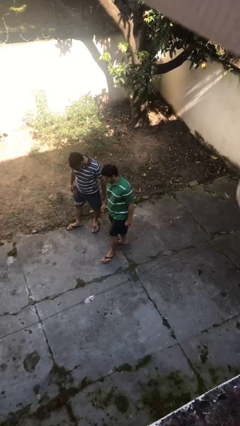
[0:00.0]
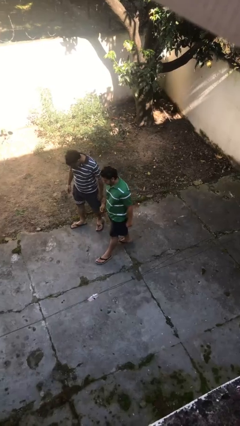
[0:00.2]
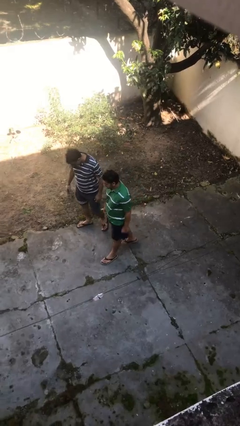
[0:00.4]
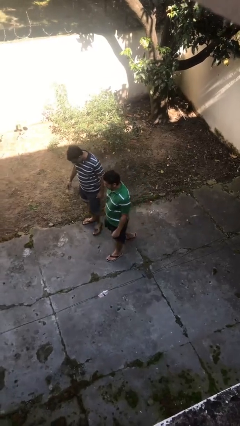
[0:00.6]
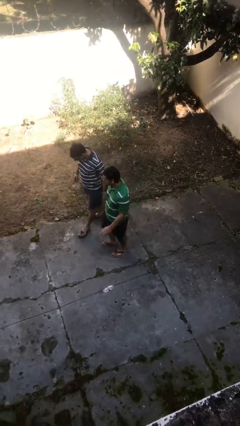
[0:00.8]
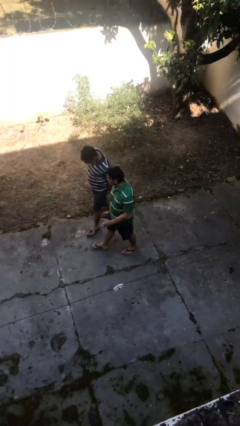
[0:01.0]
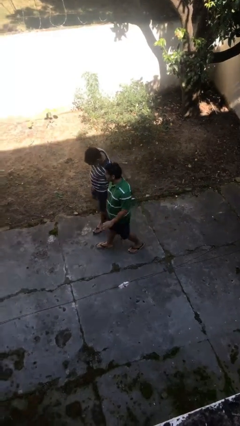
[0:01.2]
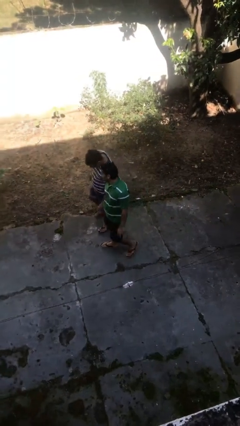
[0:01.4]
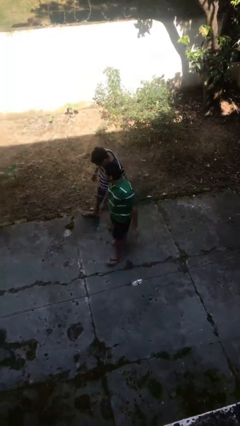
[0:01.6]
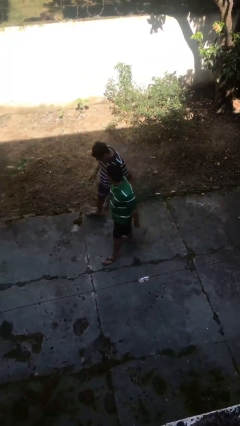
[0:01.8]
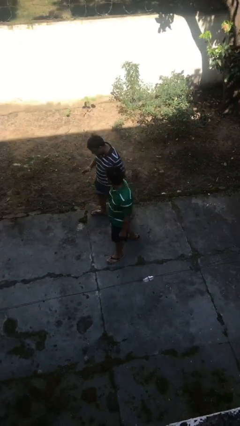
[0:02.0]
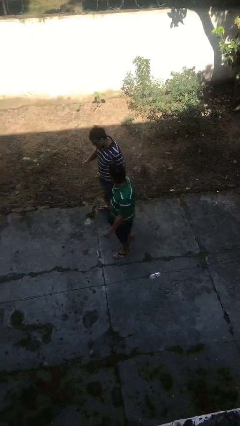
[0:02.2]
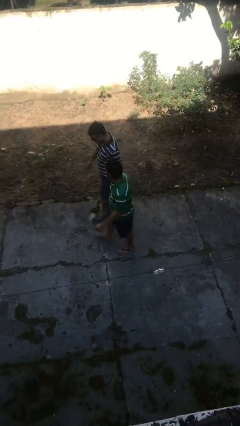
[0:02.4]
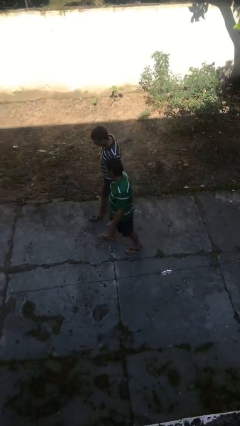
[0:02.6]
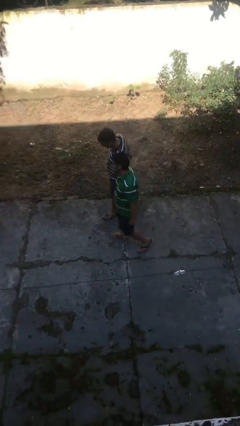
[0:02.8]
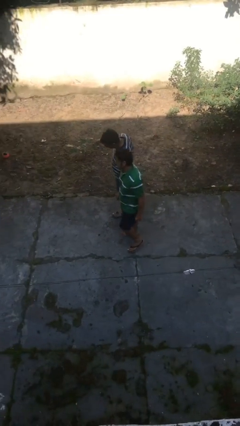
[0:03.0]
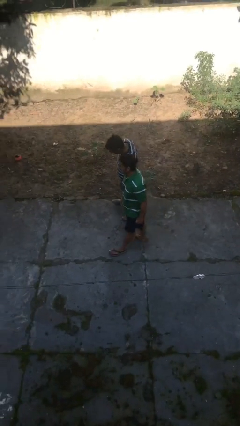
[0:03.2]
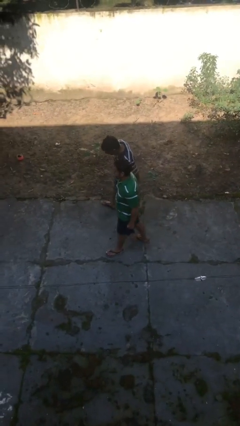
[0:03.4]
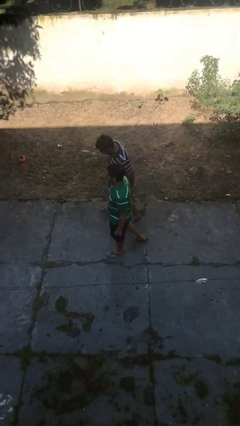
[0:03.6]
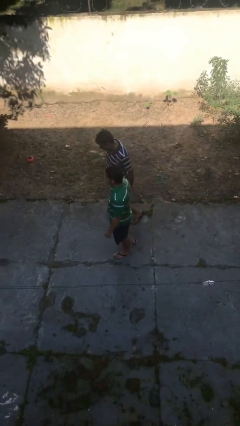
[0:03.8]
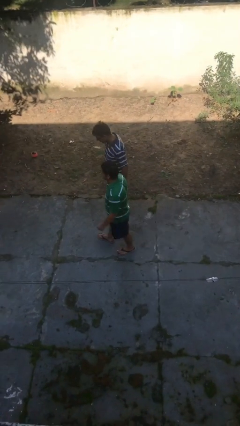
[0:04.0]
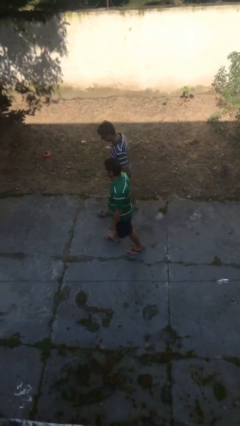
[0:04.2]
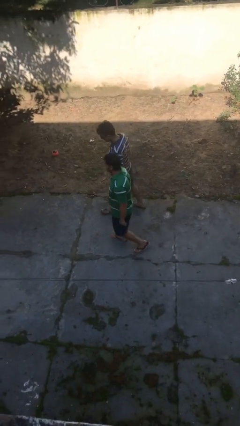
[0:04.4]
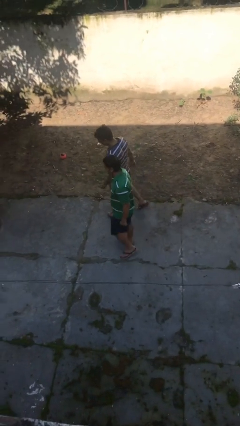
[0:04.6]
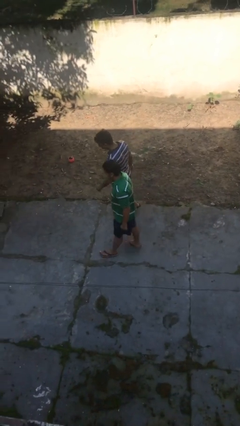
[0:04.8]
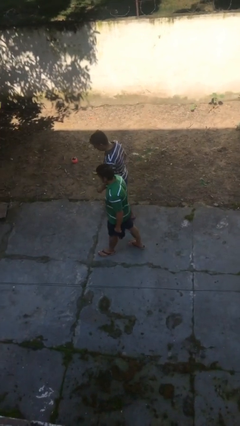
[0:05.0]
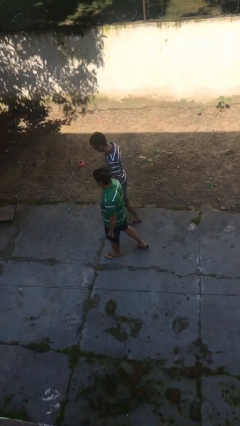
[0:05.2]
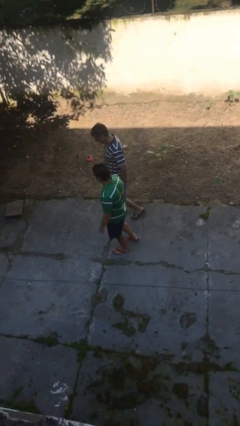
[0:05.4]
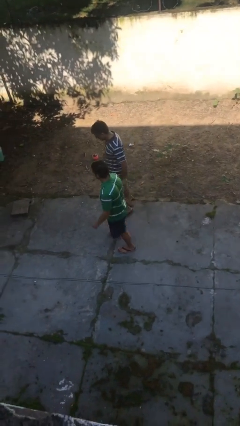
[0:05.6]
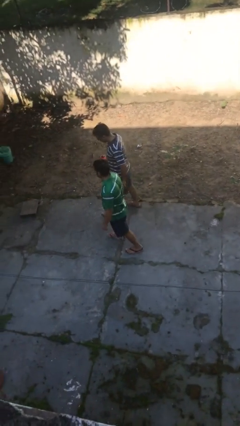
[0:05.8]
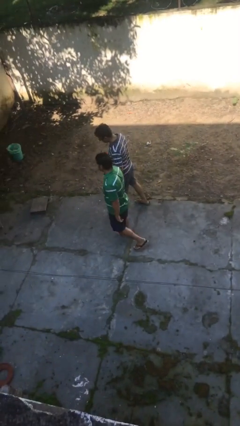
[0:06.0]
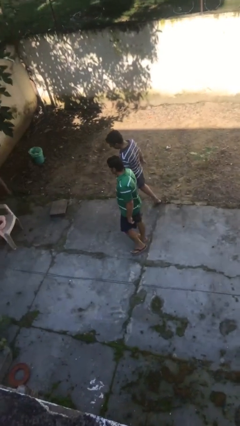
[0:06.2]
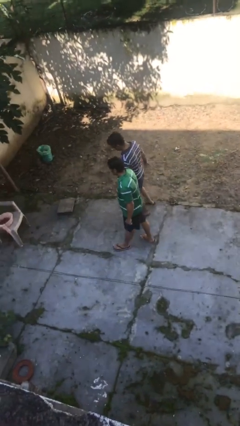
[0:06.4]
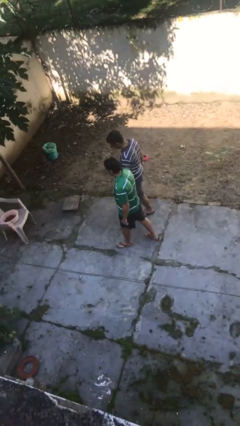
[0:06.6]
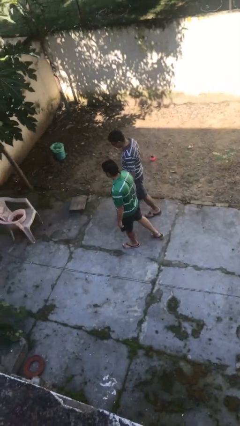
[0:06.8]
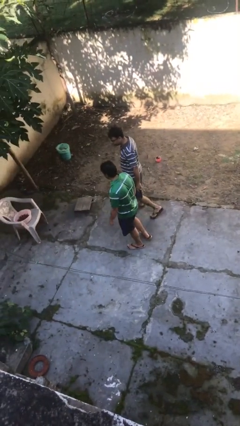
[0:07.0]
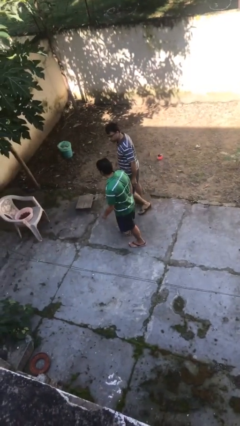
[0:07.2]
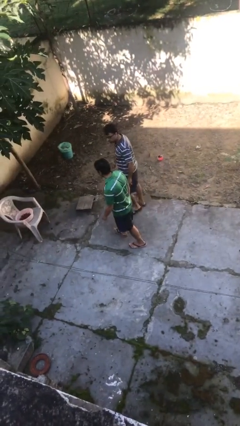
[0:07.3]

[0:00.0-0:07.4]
person talks to person

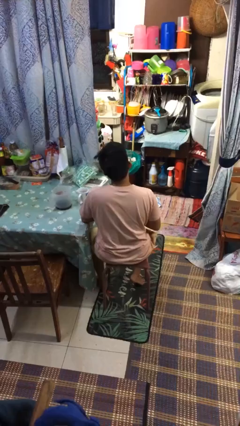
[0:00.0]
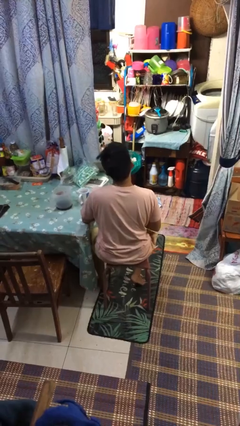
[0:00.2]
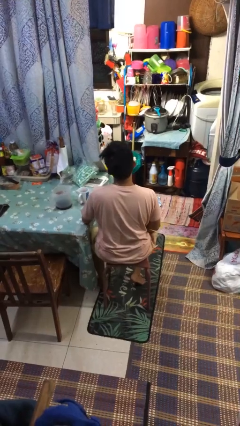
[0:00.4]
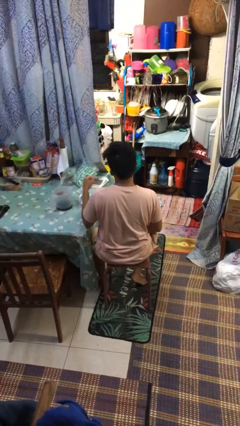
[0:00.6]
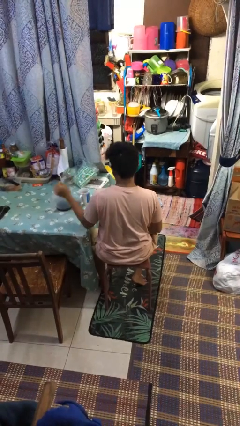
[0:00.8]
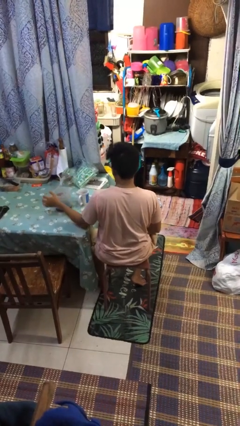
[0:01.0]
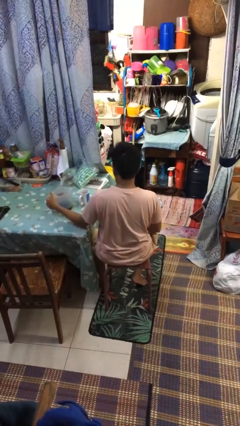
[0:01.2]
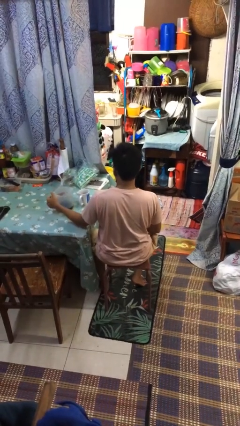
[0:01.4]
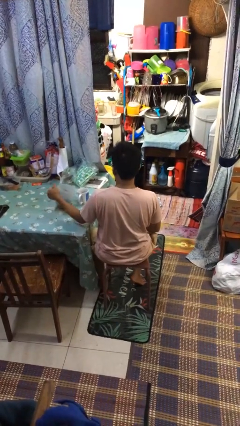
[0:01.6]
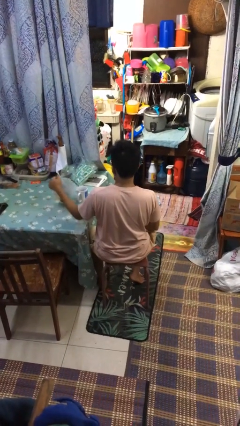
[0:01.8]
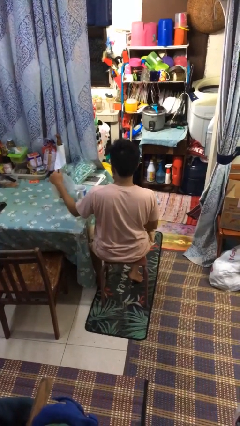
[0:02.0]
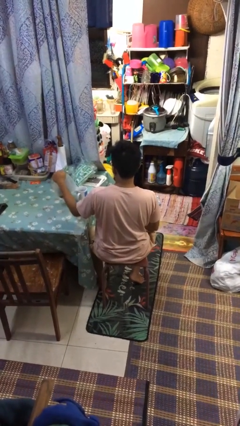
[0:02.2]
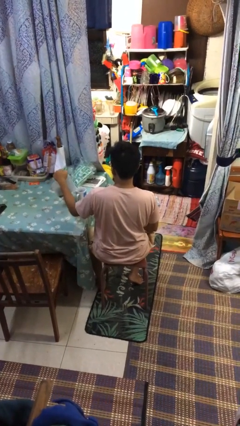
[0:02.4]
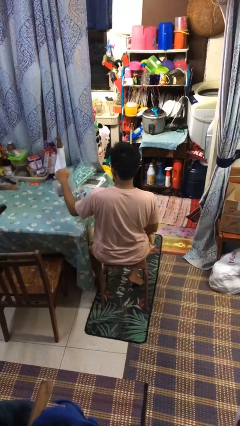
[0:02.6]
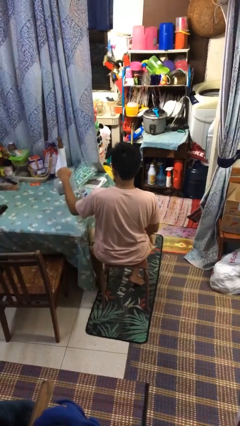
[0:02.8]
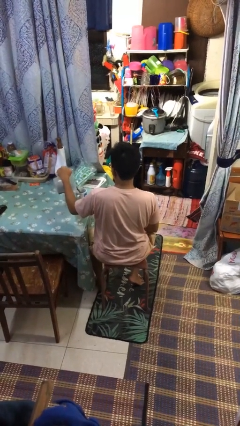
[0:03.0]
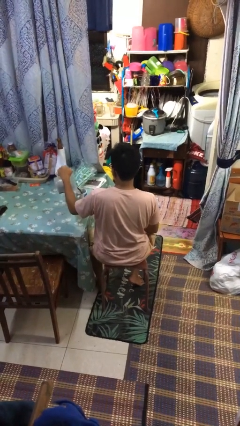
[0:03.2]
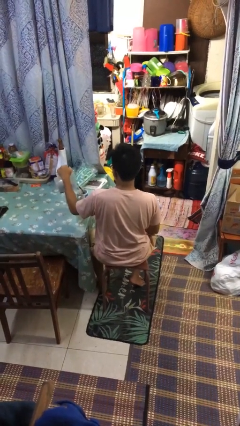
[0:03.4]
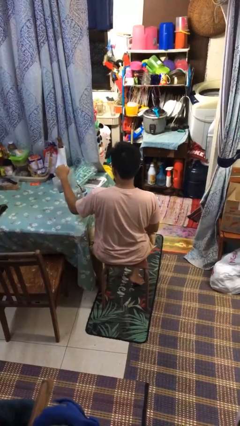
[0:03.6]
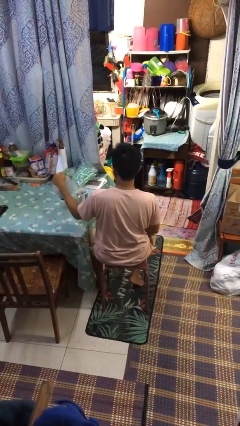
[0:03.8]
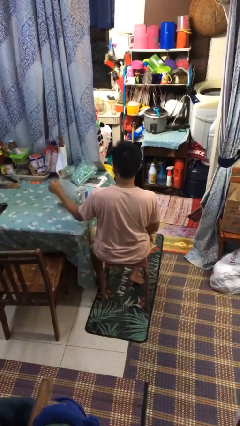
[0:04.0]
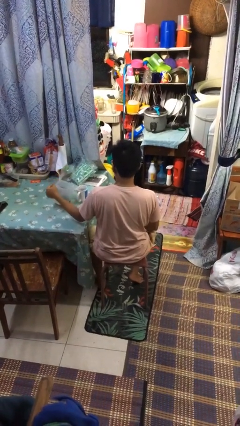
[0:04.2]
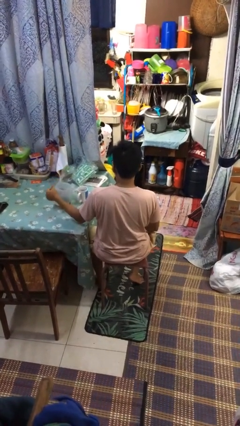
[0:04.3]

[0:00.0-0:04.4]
person pours coffee into mug

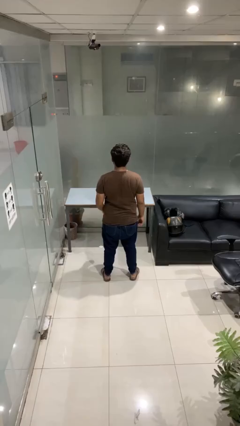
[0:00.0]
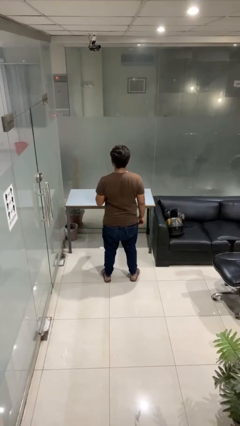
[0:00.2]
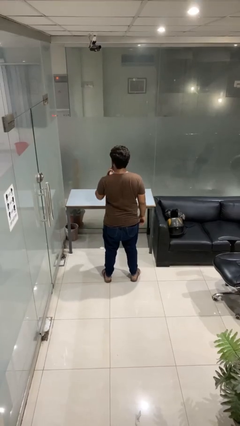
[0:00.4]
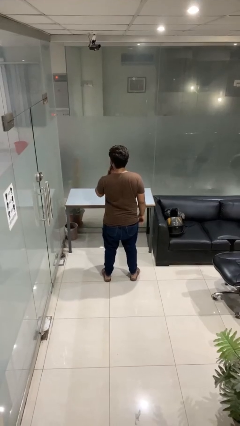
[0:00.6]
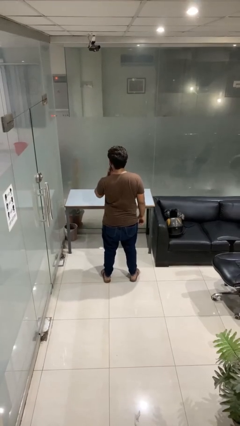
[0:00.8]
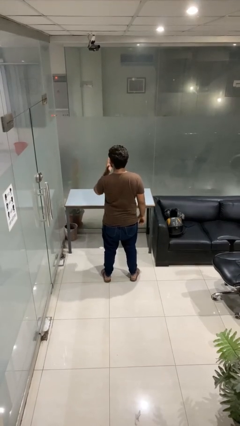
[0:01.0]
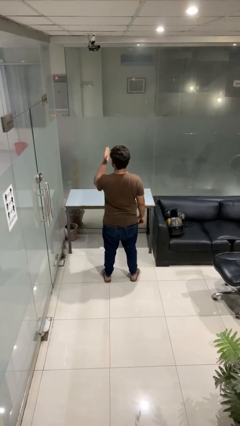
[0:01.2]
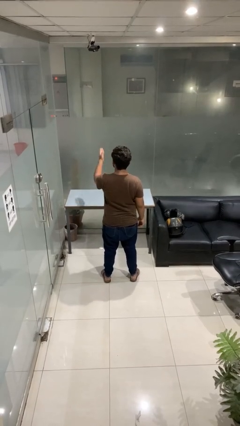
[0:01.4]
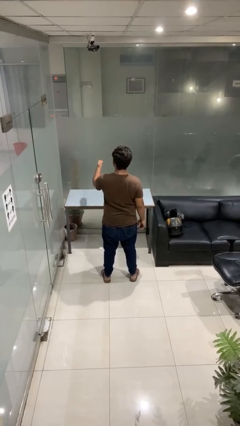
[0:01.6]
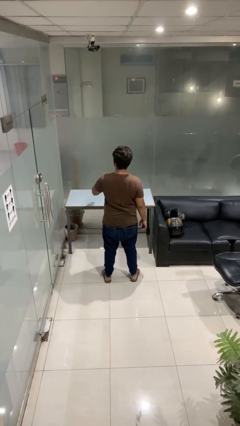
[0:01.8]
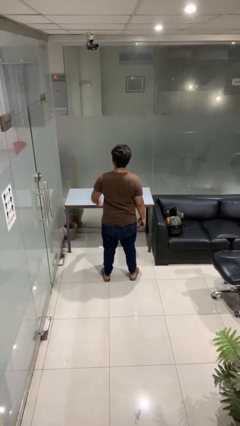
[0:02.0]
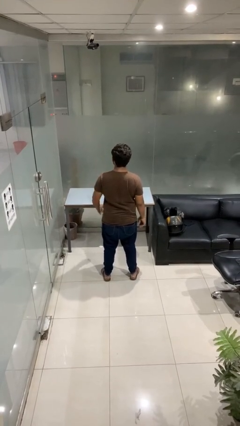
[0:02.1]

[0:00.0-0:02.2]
person gestures blow kiss

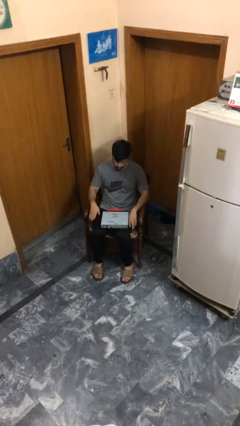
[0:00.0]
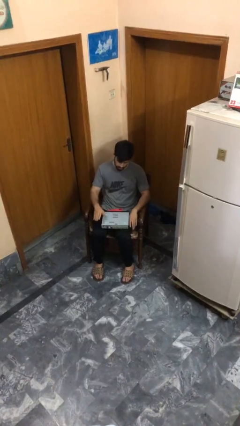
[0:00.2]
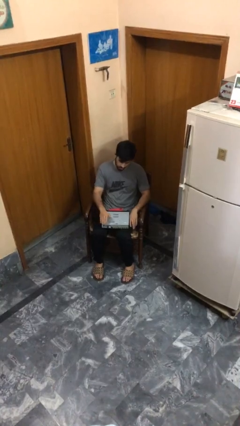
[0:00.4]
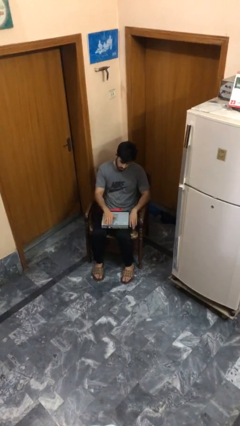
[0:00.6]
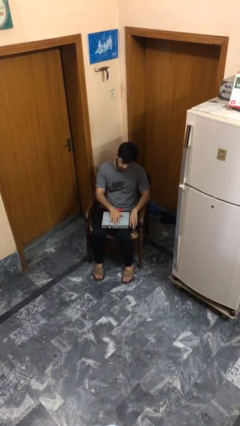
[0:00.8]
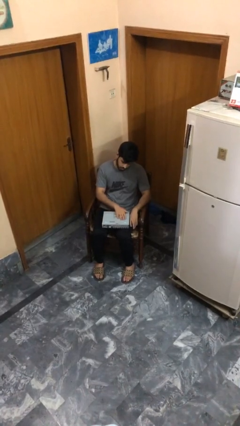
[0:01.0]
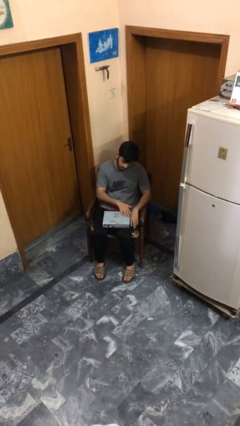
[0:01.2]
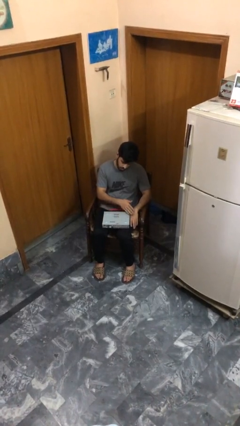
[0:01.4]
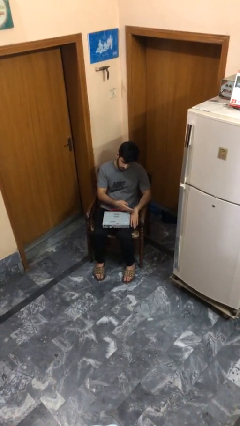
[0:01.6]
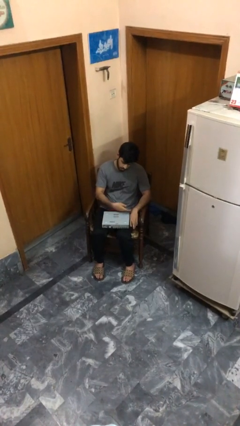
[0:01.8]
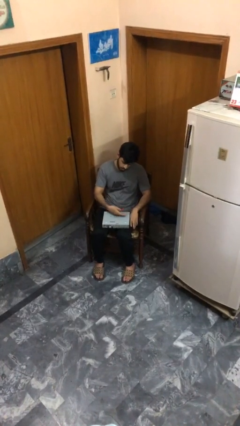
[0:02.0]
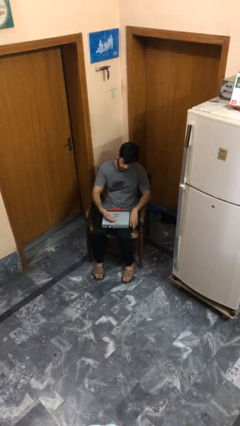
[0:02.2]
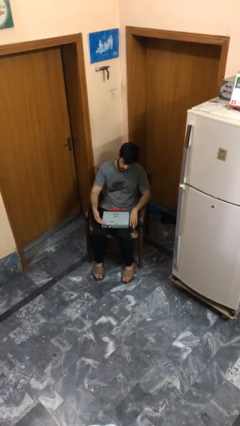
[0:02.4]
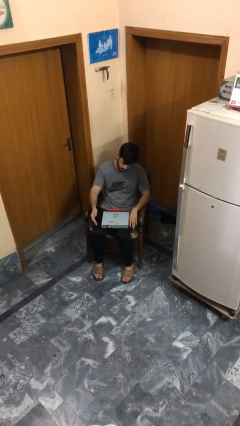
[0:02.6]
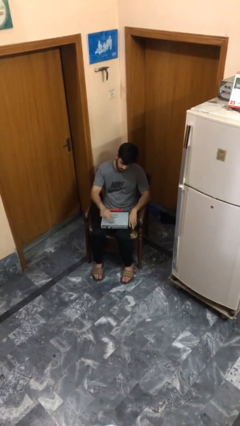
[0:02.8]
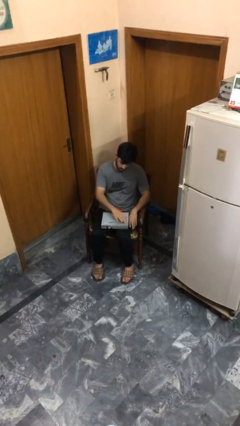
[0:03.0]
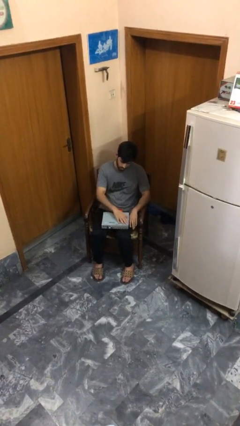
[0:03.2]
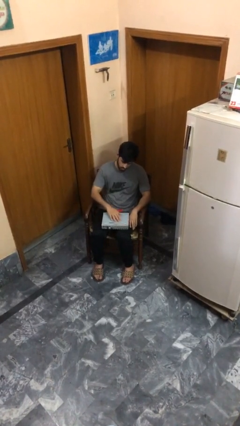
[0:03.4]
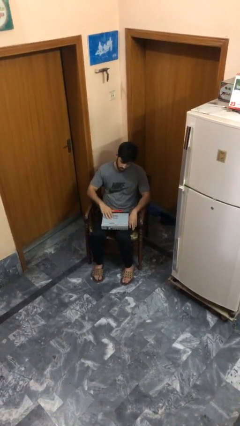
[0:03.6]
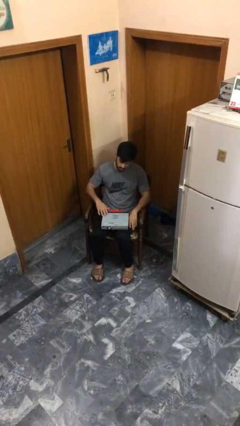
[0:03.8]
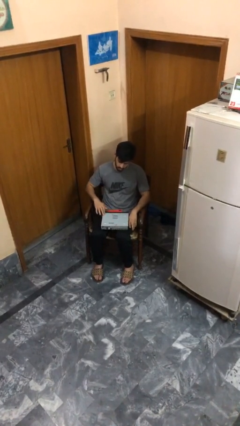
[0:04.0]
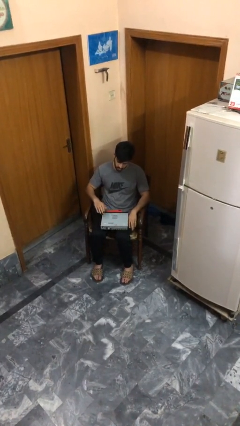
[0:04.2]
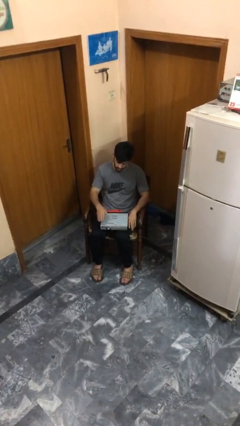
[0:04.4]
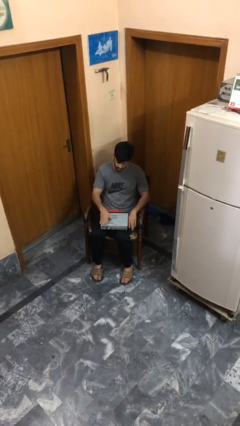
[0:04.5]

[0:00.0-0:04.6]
person waves hand over object
